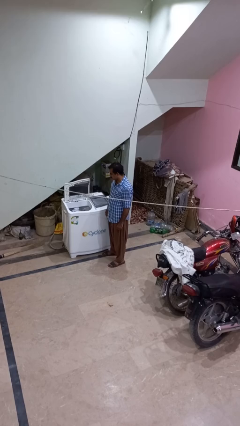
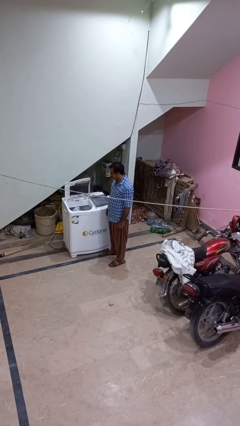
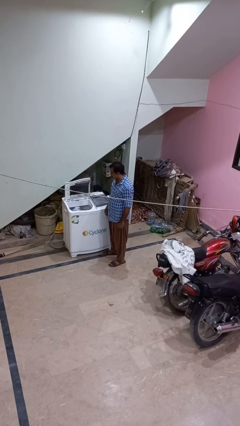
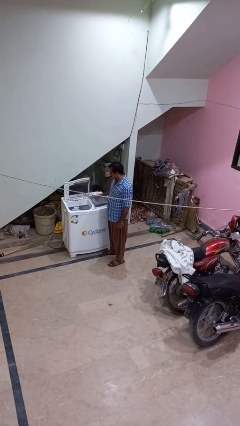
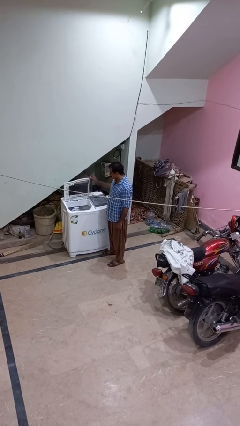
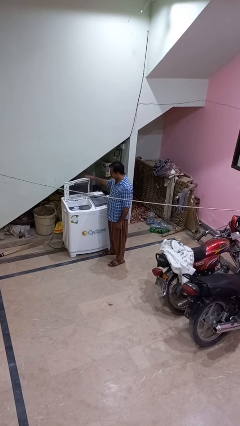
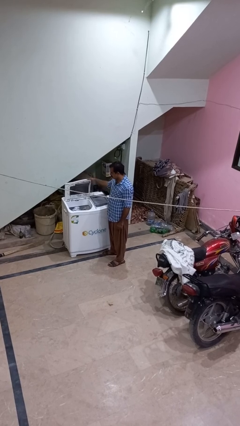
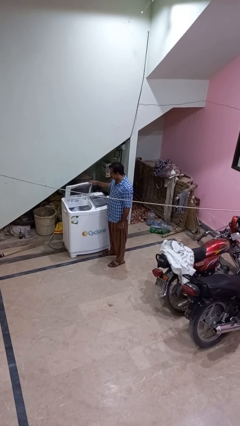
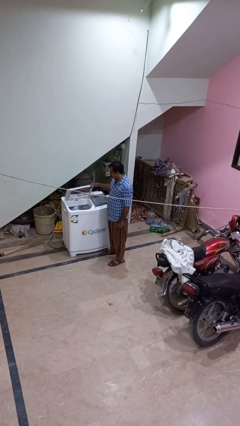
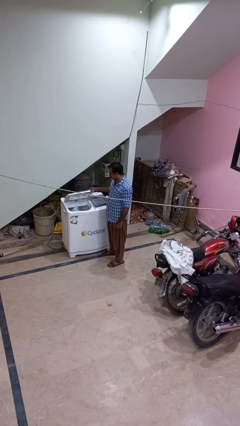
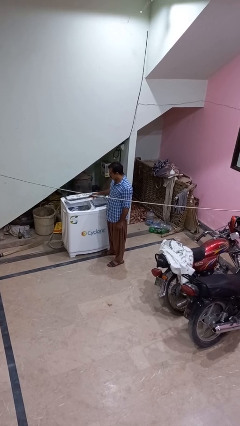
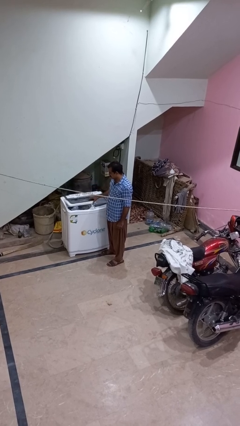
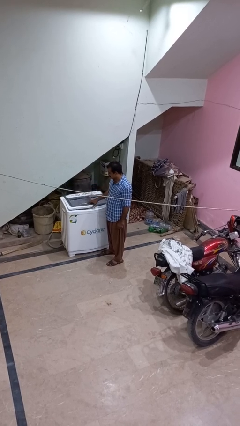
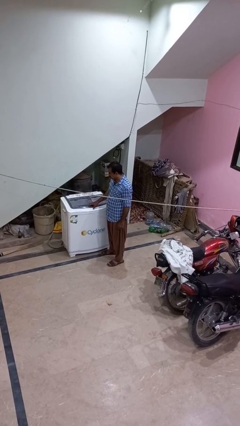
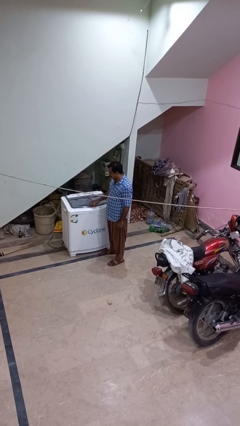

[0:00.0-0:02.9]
person closes clothes washer

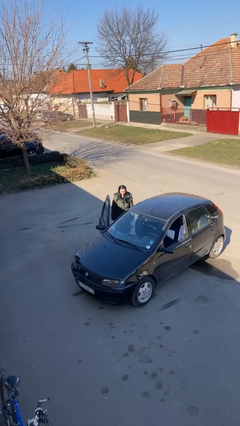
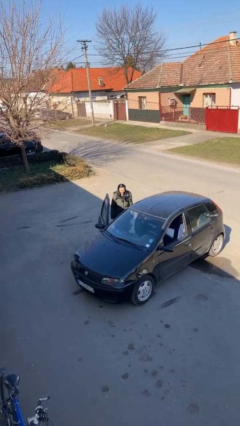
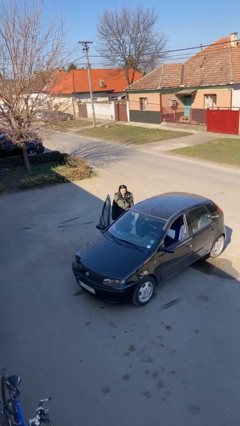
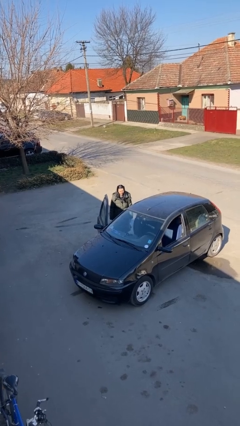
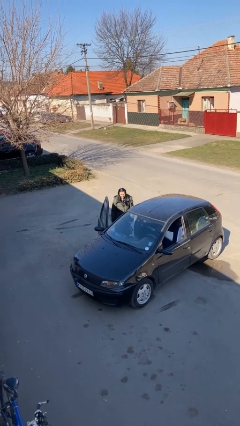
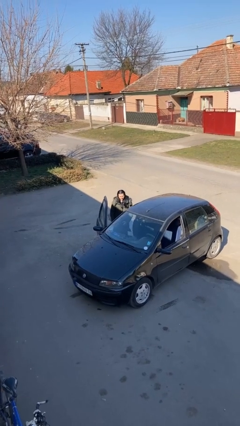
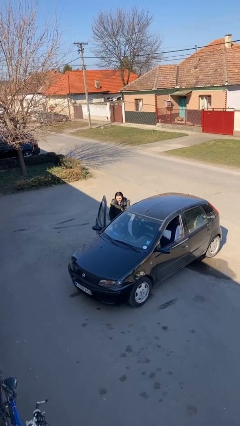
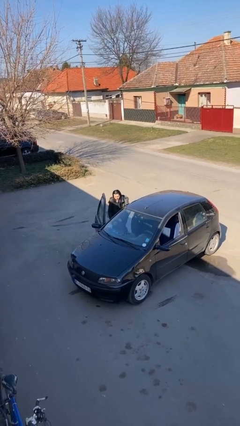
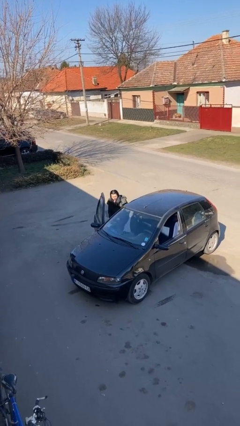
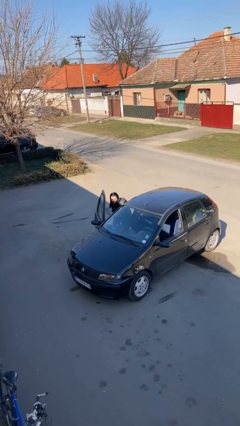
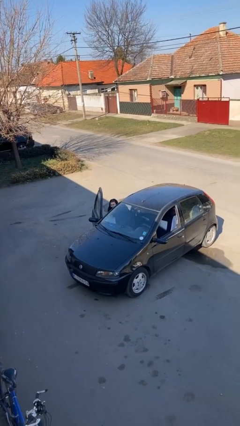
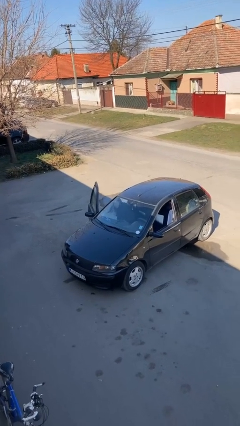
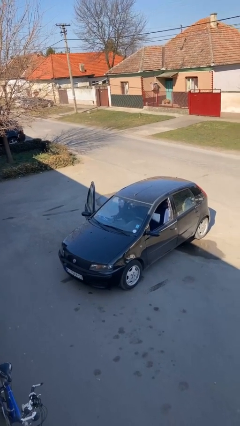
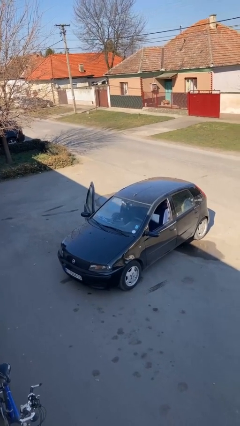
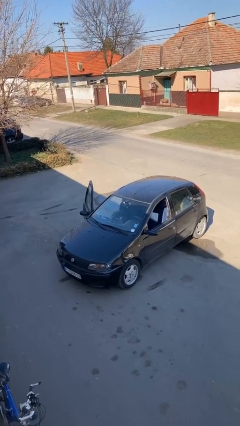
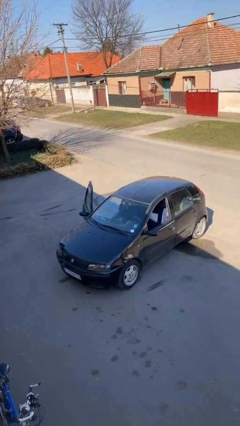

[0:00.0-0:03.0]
person enters car

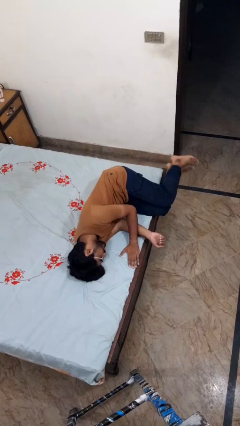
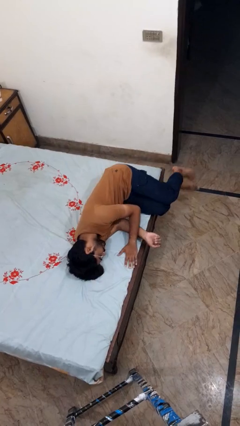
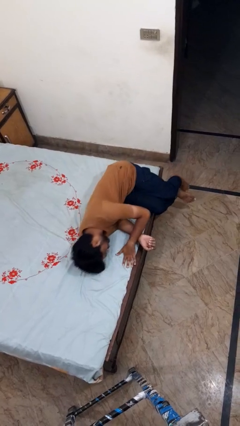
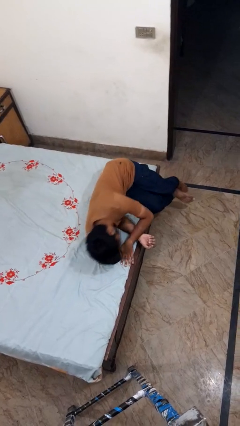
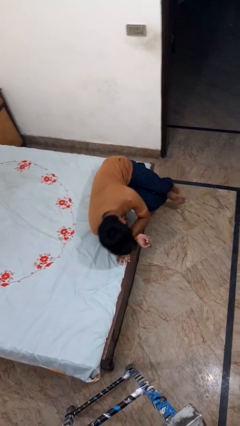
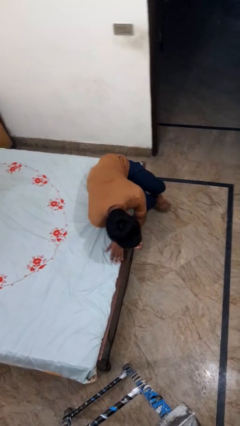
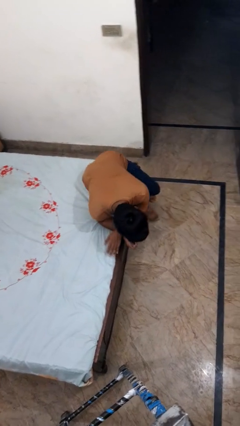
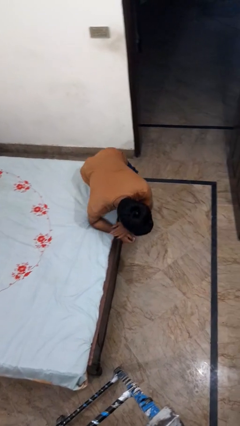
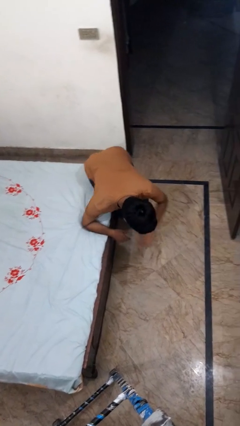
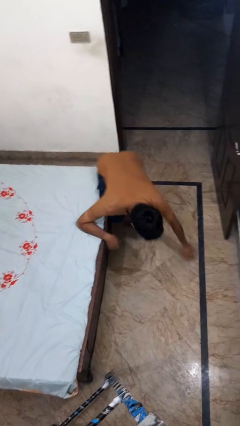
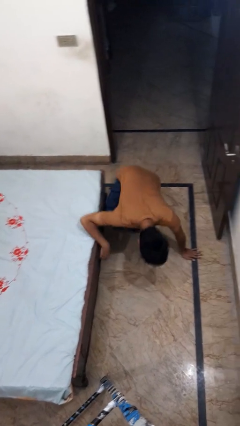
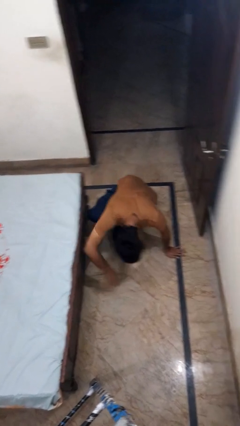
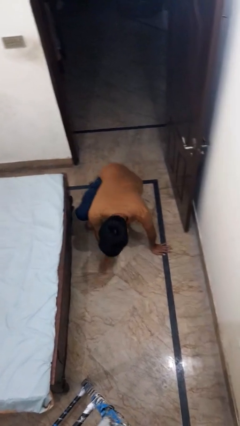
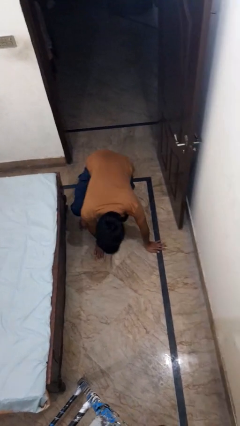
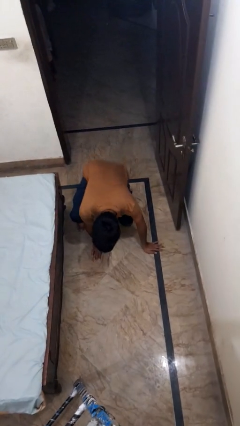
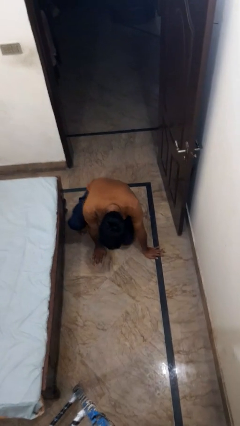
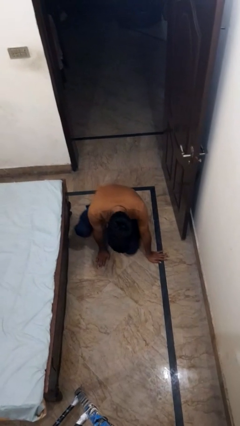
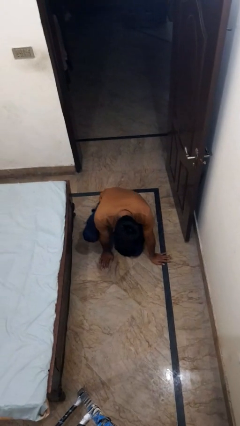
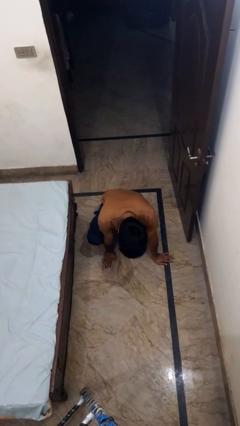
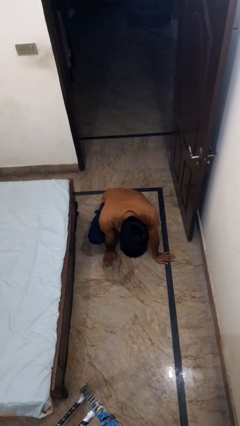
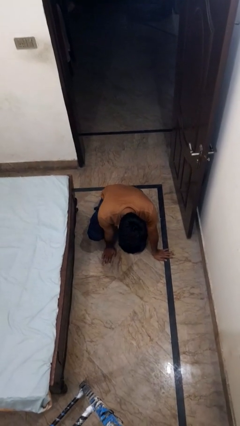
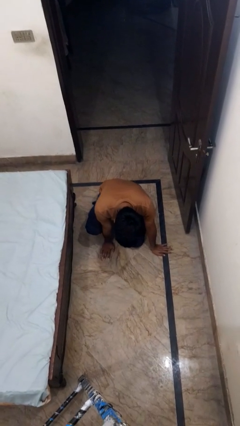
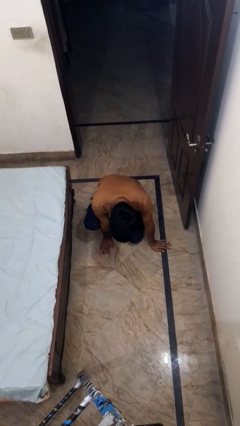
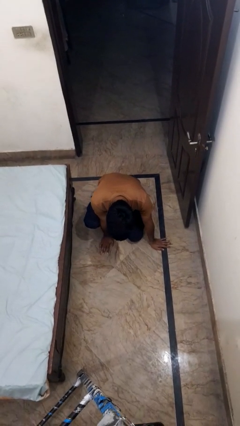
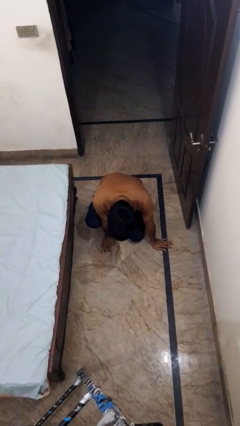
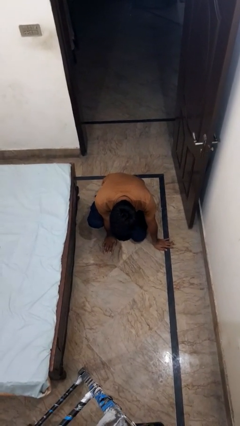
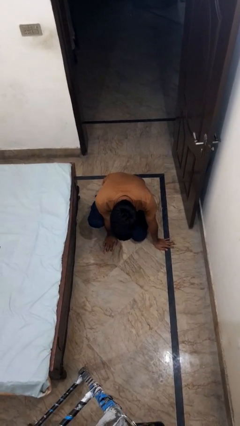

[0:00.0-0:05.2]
person falls from bed

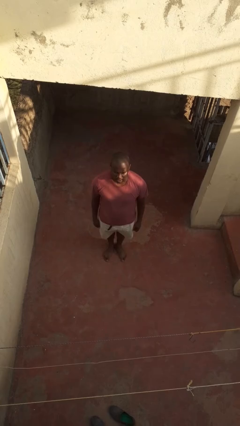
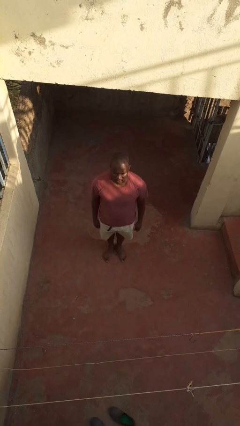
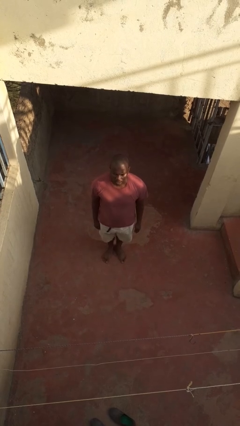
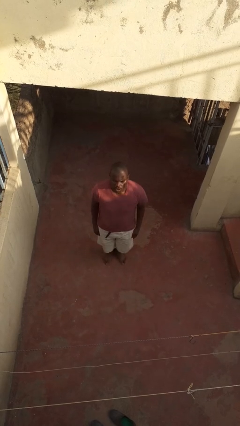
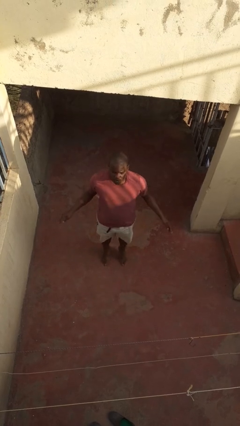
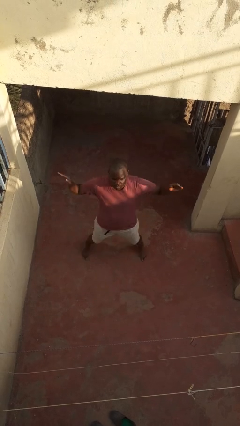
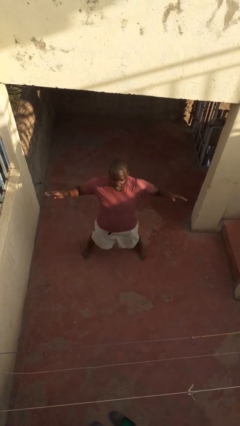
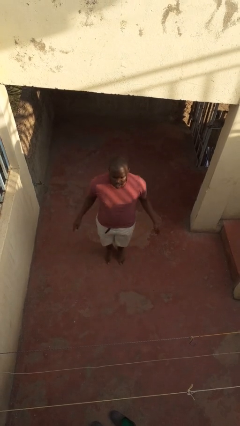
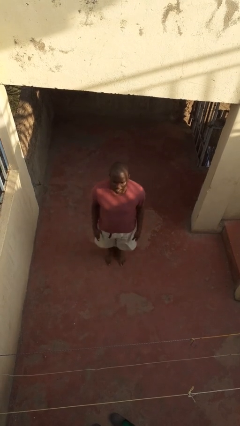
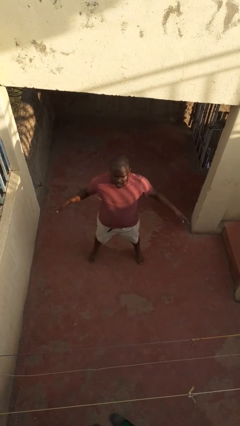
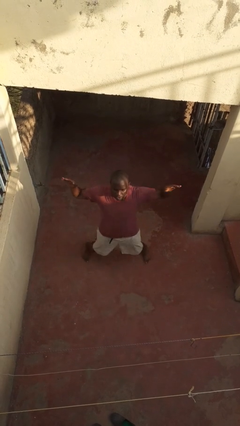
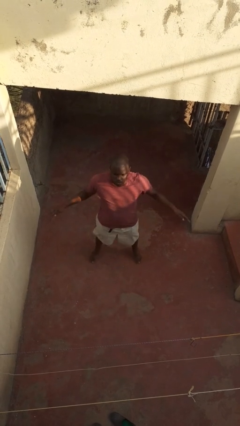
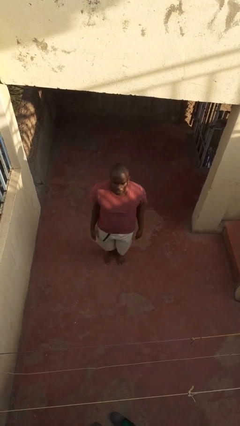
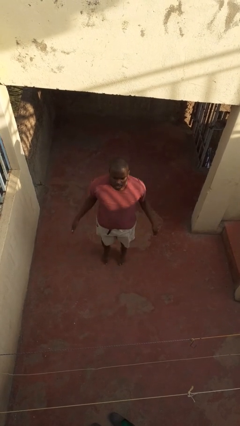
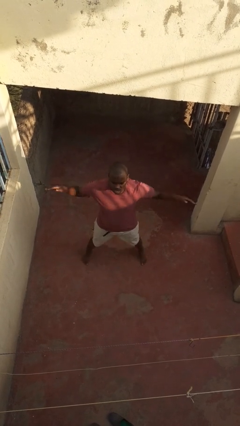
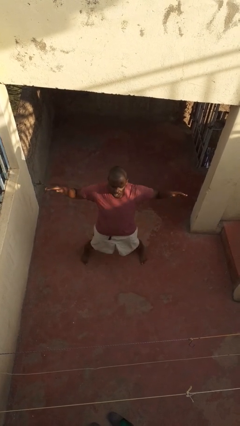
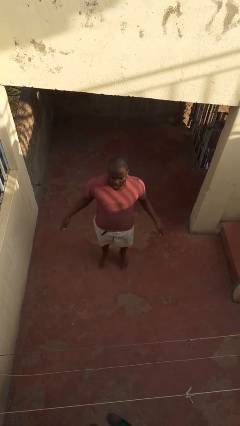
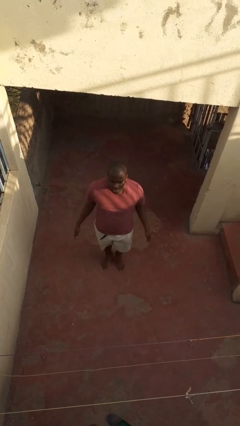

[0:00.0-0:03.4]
person exercises with jumping jacks

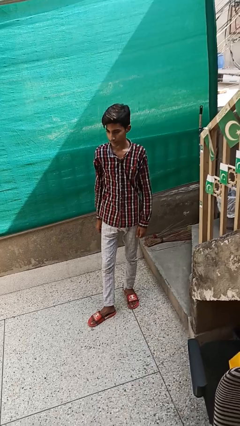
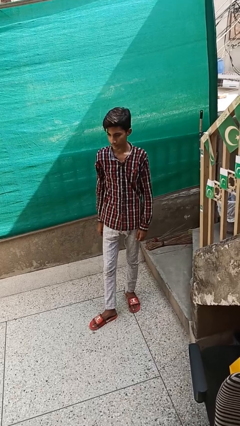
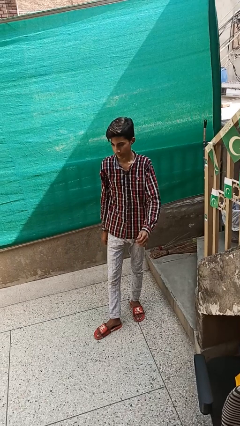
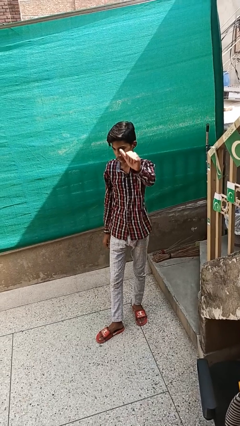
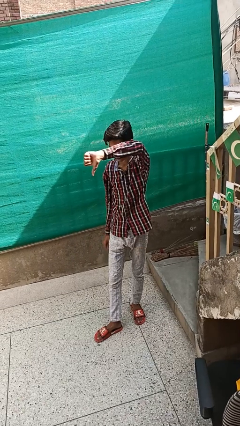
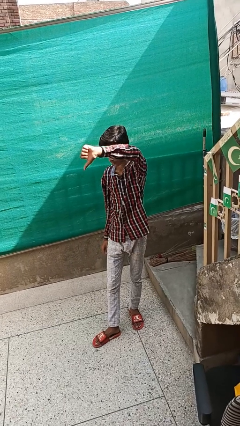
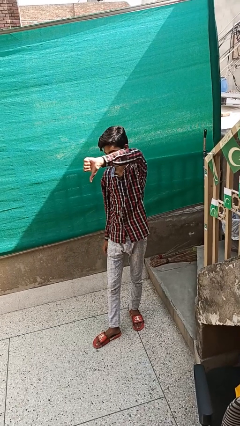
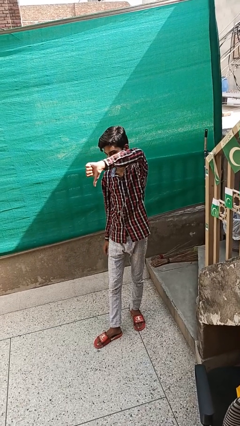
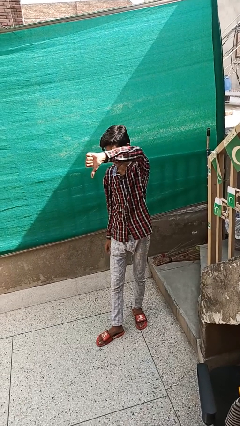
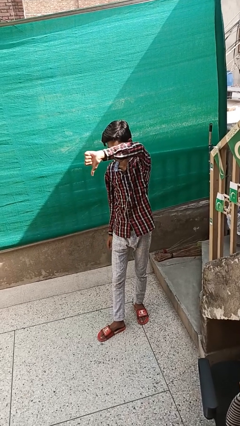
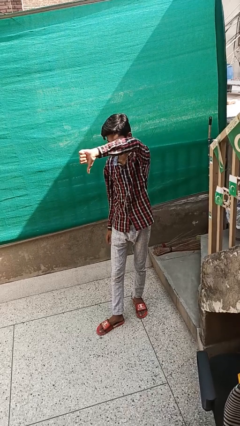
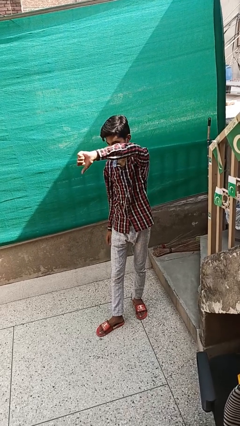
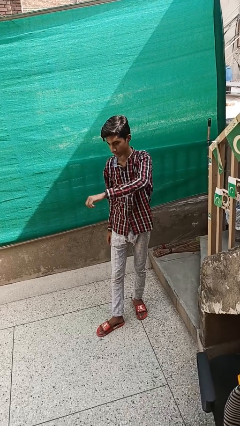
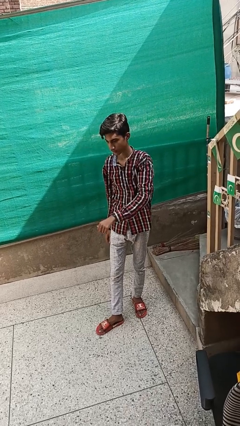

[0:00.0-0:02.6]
person gestures thumbs down

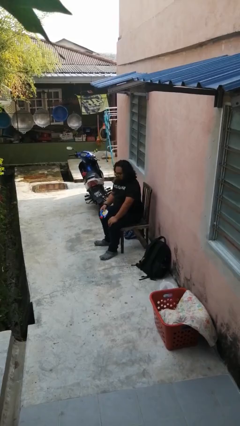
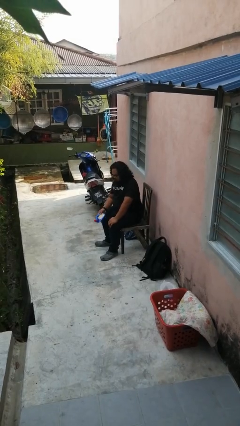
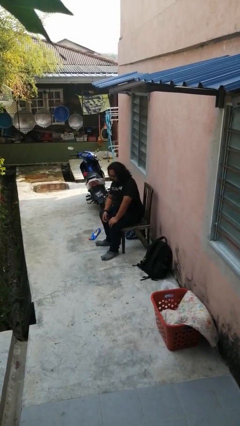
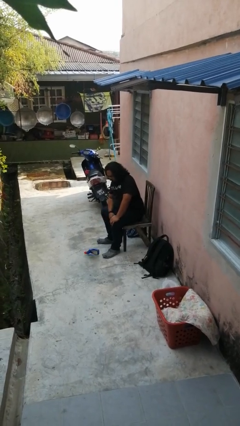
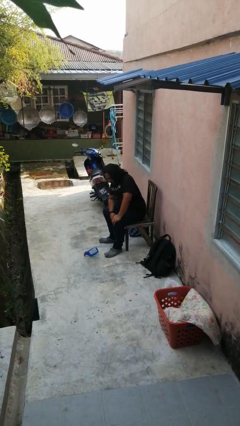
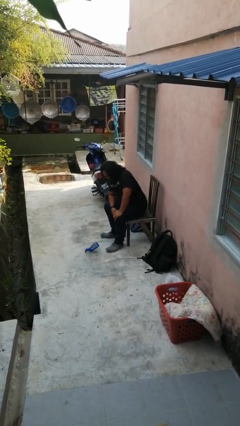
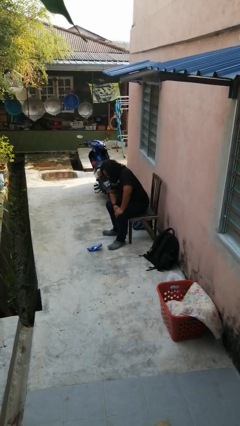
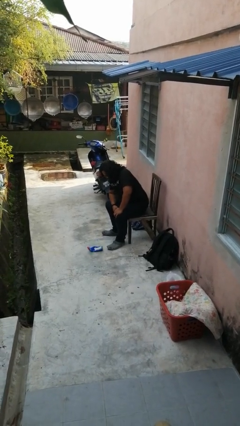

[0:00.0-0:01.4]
person drops object
